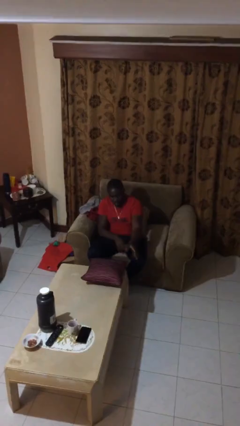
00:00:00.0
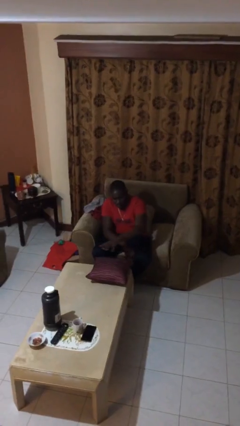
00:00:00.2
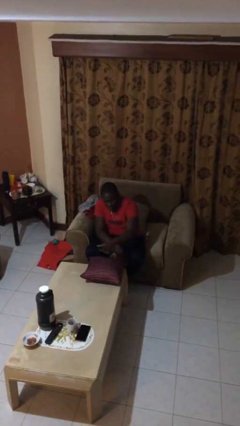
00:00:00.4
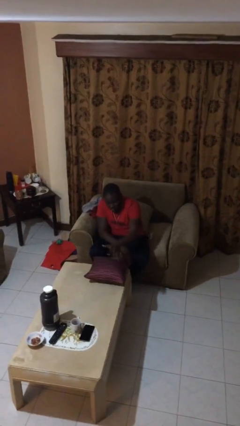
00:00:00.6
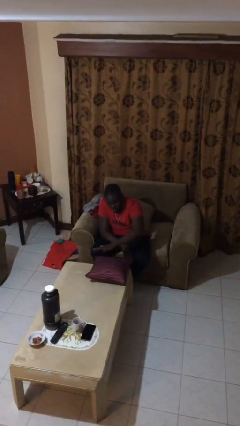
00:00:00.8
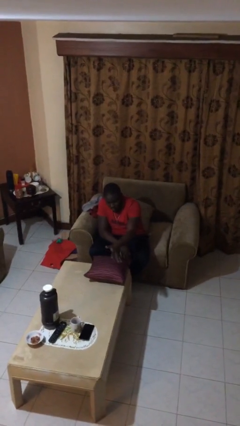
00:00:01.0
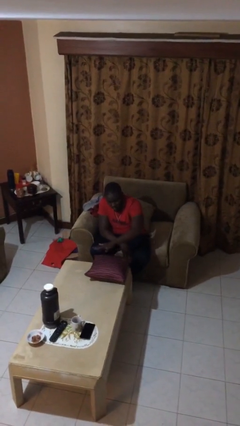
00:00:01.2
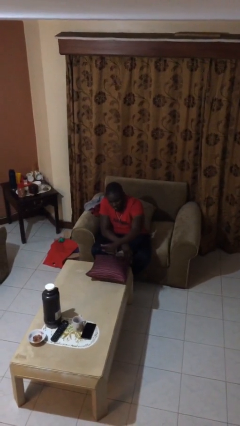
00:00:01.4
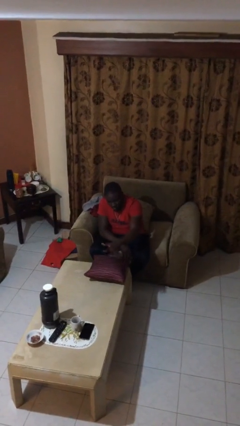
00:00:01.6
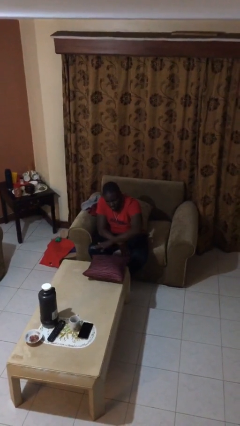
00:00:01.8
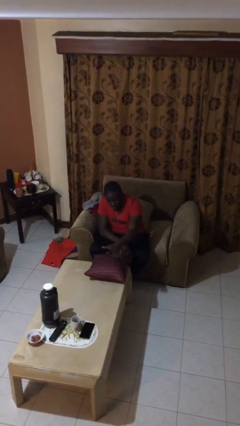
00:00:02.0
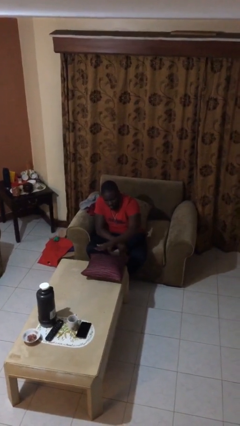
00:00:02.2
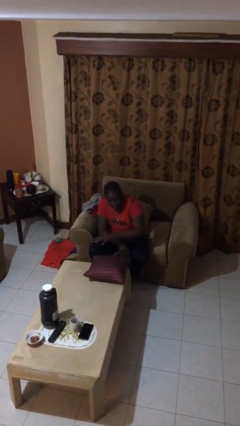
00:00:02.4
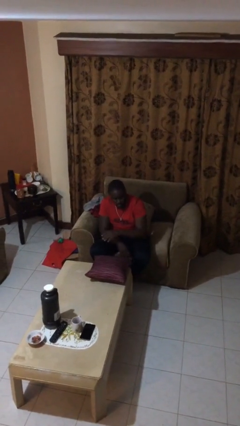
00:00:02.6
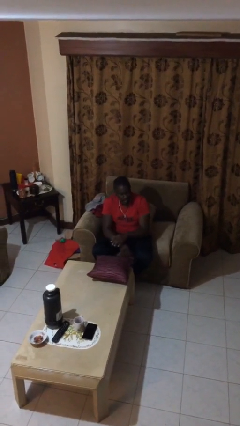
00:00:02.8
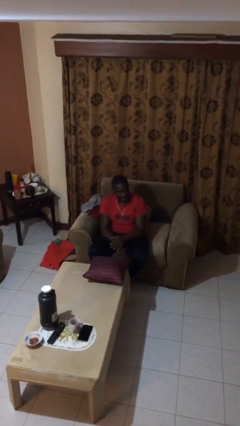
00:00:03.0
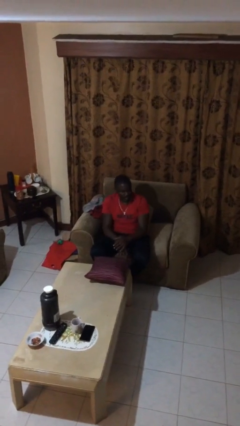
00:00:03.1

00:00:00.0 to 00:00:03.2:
person waves hand over object

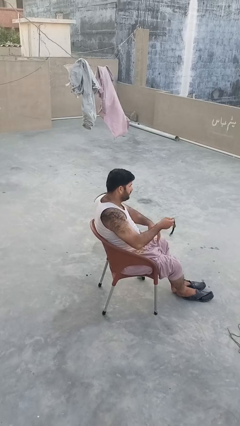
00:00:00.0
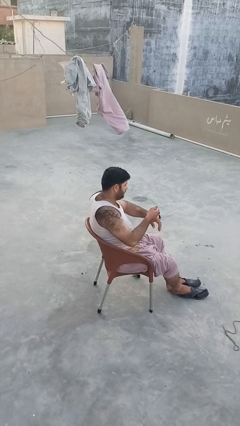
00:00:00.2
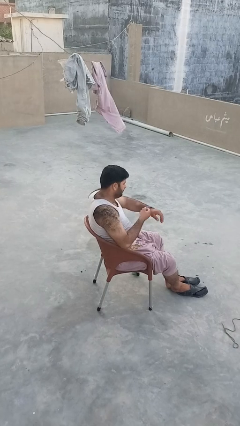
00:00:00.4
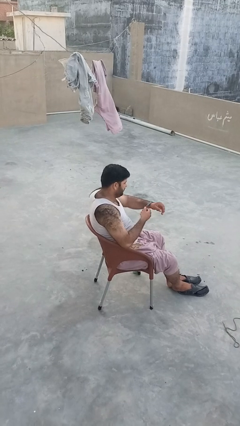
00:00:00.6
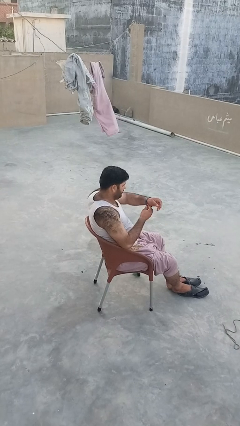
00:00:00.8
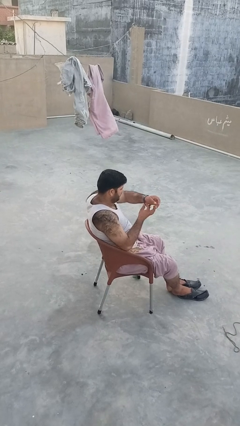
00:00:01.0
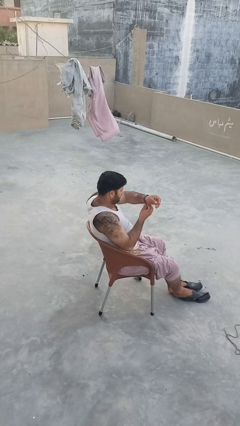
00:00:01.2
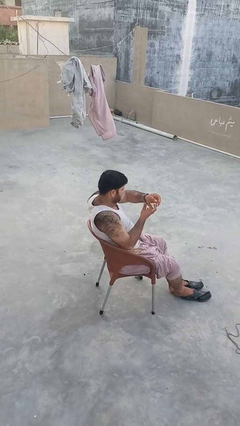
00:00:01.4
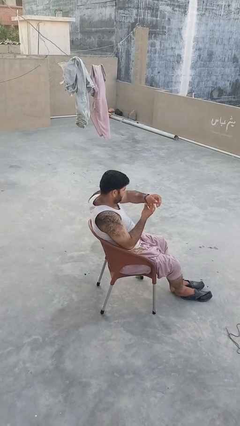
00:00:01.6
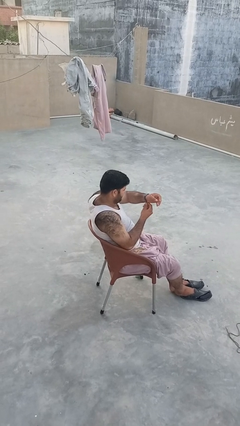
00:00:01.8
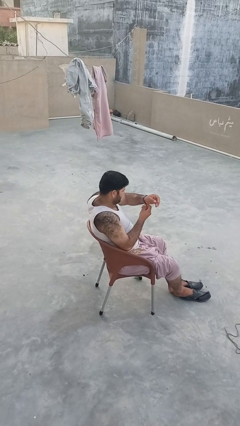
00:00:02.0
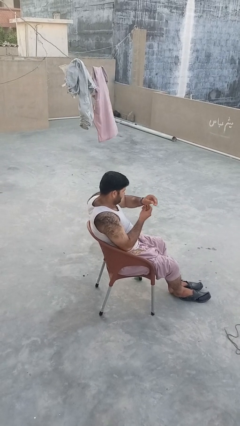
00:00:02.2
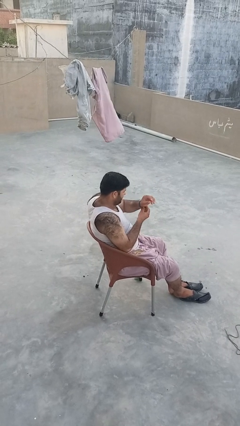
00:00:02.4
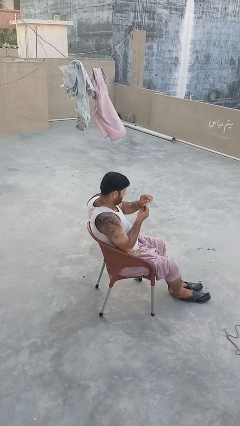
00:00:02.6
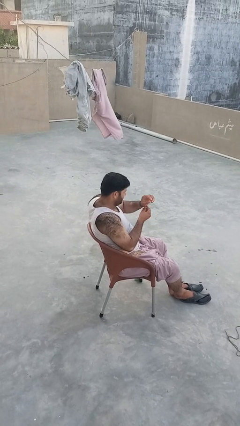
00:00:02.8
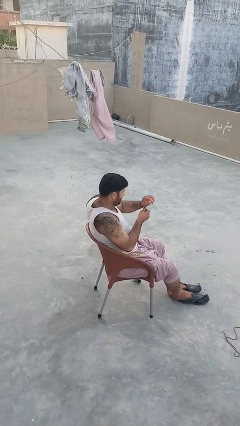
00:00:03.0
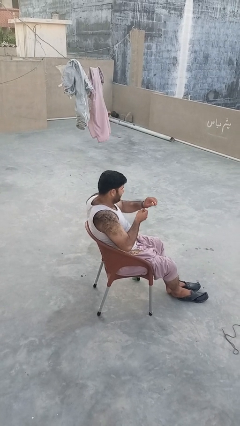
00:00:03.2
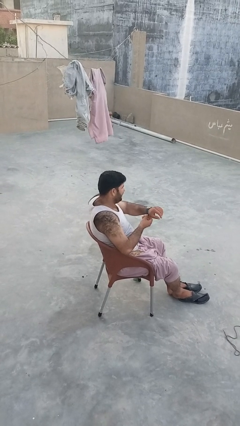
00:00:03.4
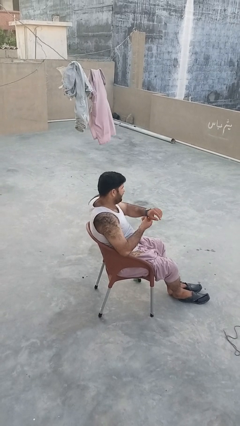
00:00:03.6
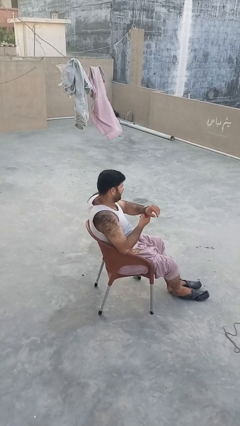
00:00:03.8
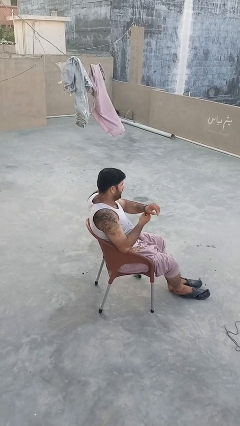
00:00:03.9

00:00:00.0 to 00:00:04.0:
person puts on wristwatch

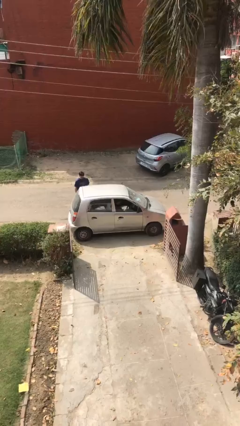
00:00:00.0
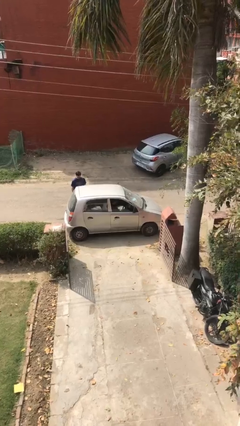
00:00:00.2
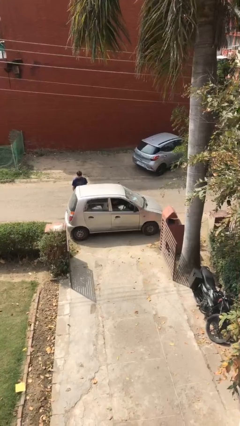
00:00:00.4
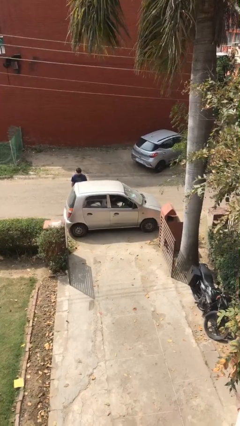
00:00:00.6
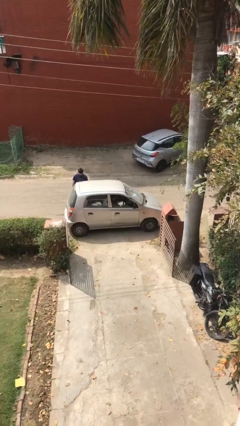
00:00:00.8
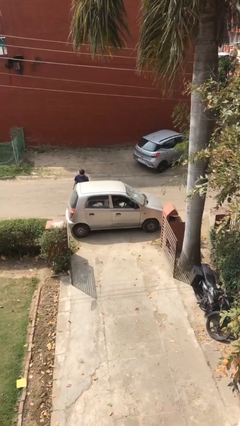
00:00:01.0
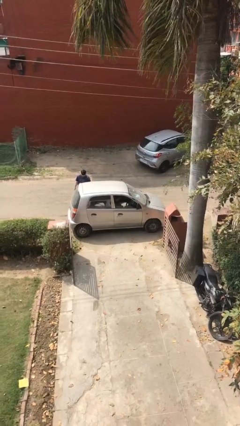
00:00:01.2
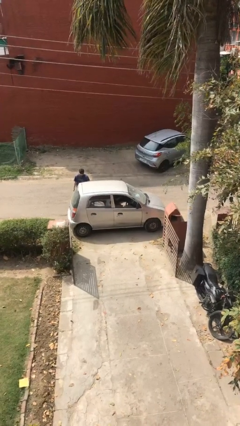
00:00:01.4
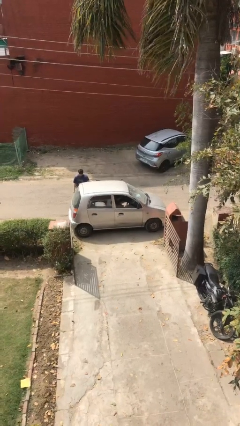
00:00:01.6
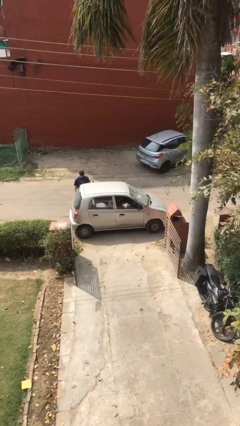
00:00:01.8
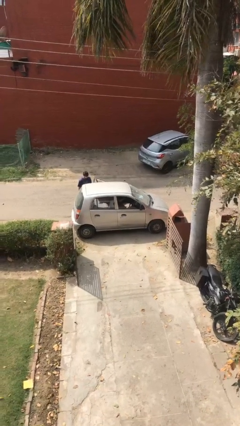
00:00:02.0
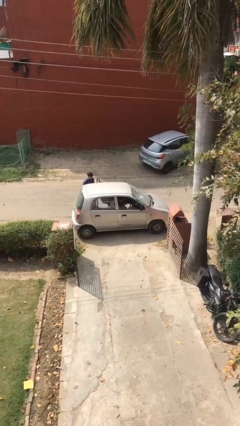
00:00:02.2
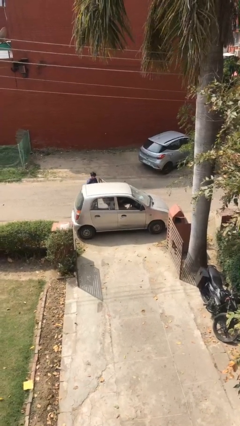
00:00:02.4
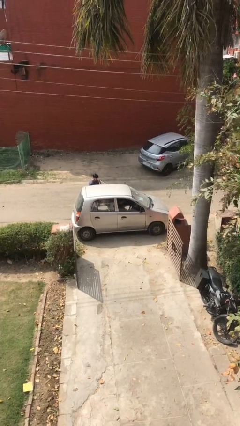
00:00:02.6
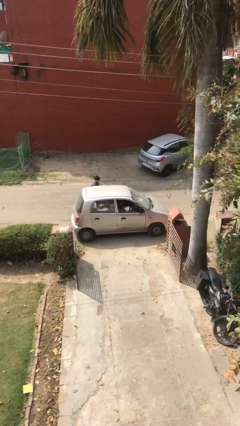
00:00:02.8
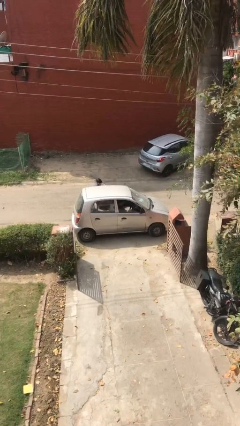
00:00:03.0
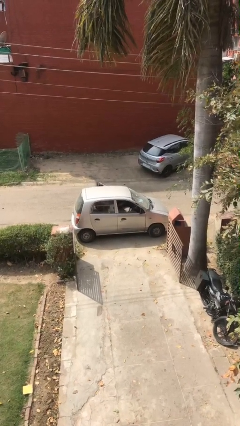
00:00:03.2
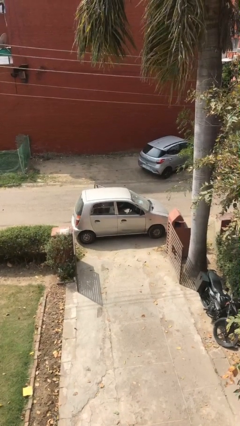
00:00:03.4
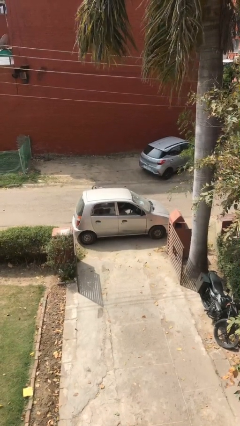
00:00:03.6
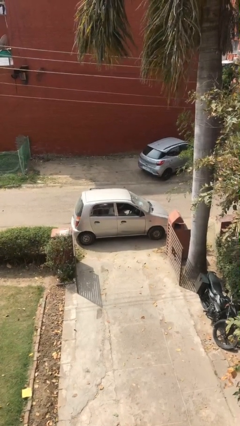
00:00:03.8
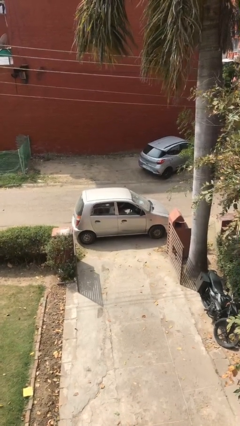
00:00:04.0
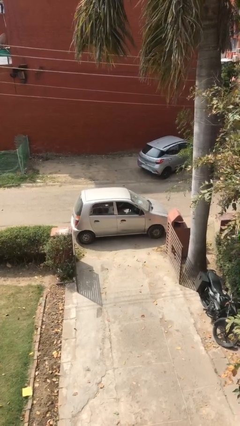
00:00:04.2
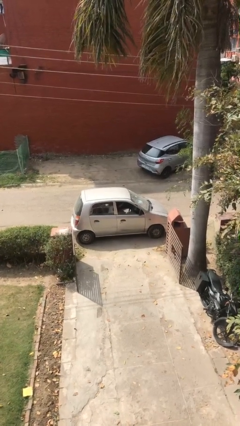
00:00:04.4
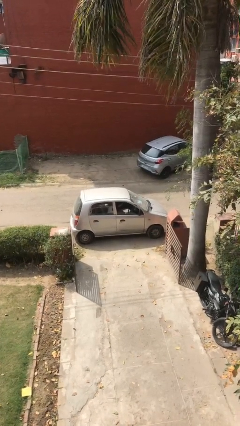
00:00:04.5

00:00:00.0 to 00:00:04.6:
car picks up person

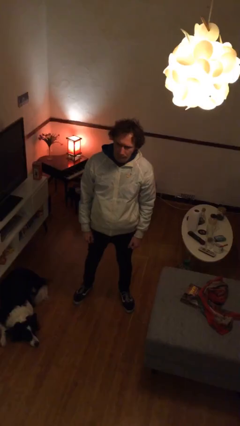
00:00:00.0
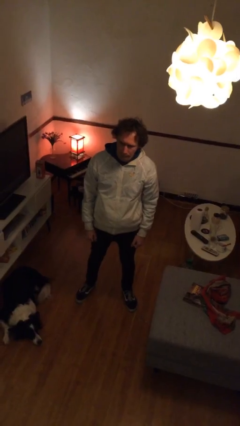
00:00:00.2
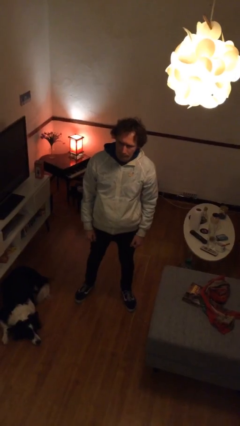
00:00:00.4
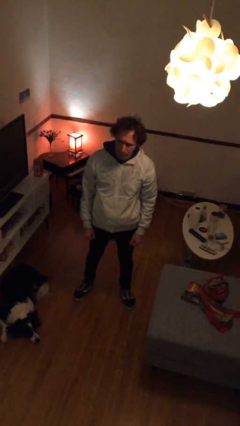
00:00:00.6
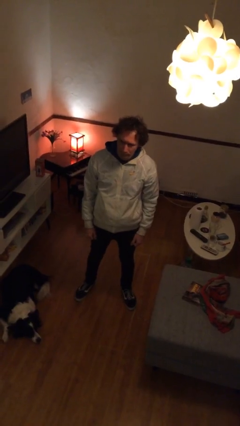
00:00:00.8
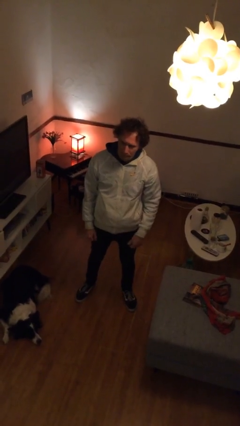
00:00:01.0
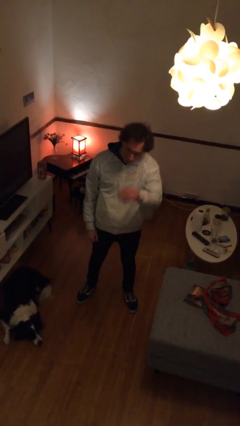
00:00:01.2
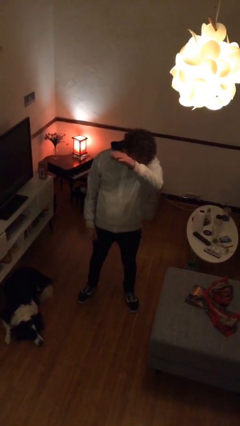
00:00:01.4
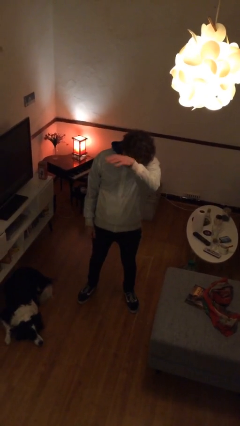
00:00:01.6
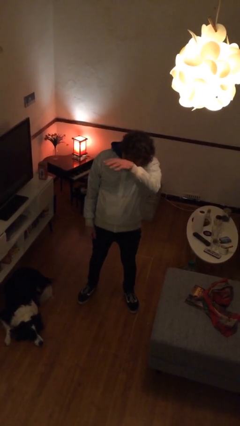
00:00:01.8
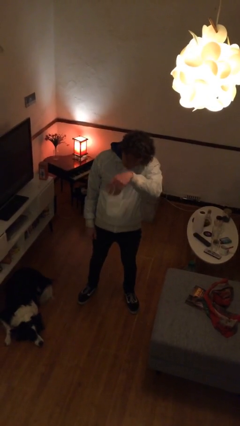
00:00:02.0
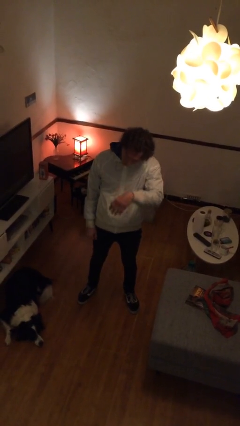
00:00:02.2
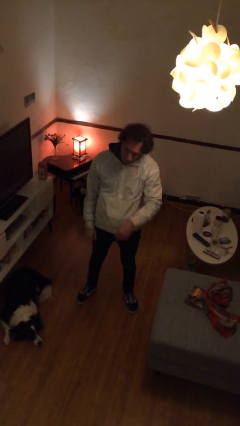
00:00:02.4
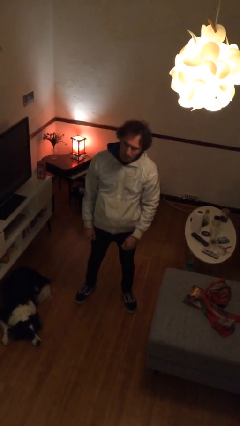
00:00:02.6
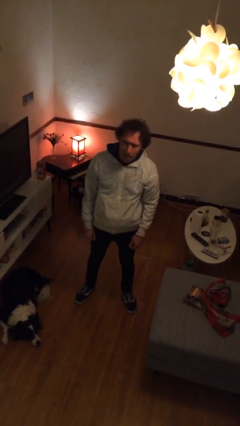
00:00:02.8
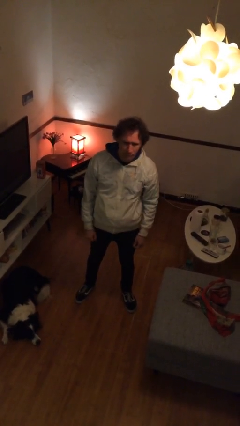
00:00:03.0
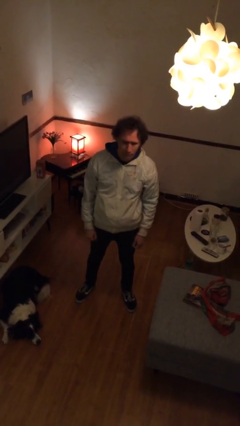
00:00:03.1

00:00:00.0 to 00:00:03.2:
person gestures come here

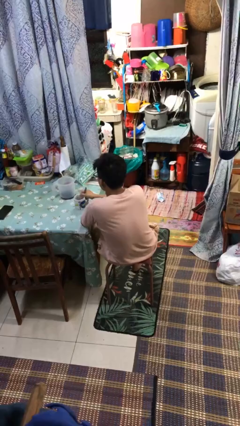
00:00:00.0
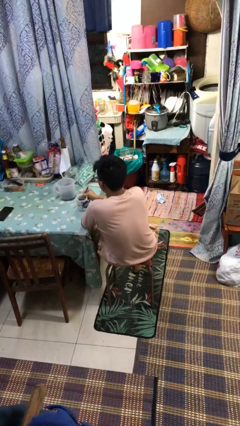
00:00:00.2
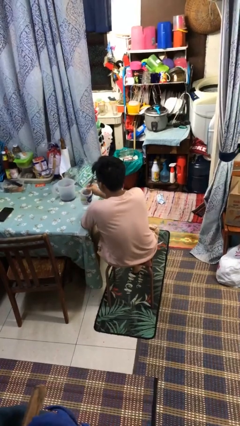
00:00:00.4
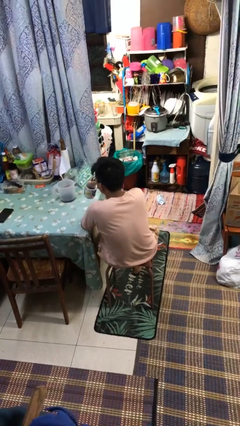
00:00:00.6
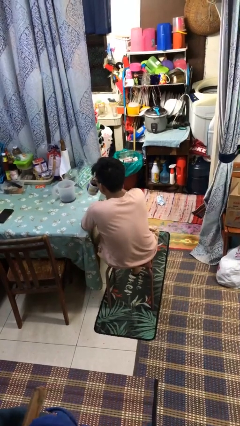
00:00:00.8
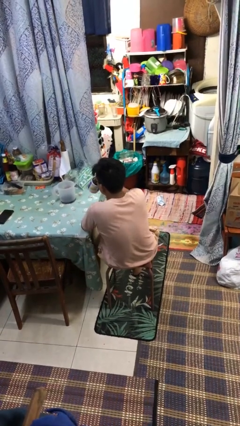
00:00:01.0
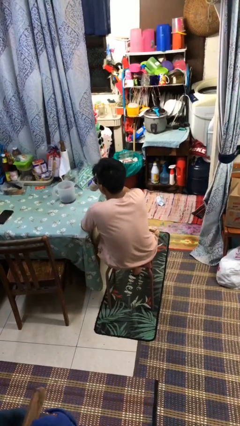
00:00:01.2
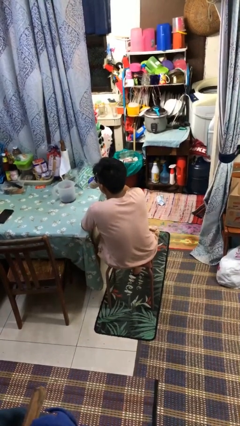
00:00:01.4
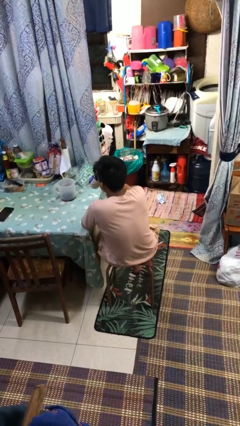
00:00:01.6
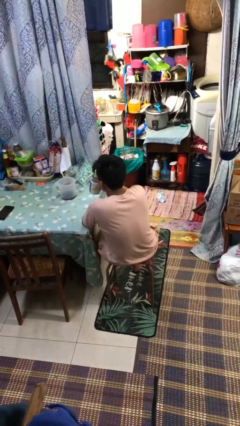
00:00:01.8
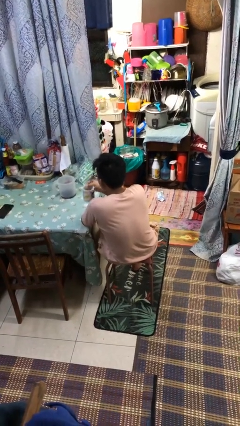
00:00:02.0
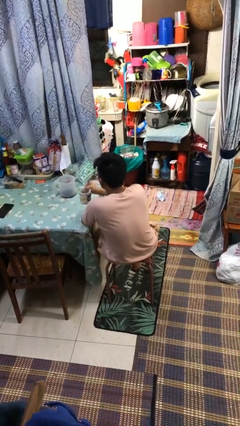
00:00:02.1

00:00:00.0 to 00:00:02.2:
person drinks from mug

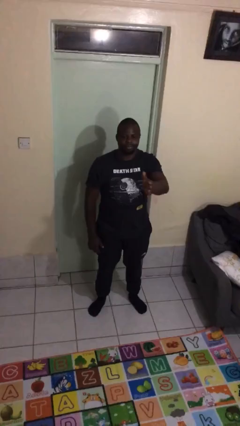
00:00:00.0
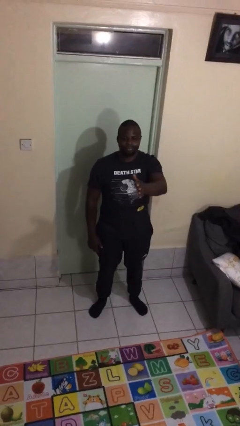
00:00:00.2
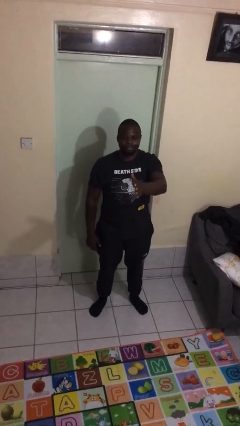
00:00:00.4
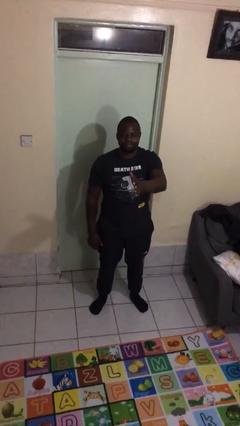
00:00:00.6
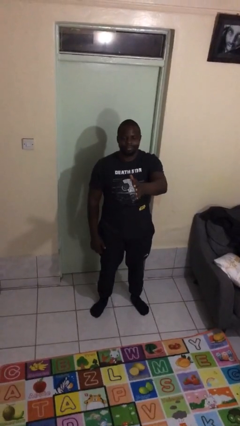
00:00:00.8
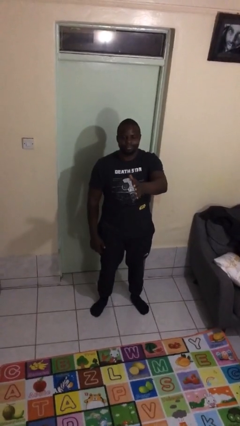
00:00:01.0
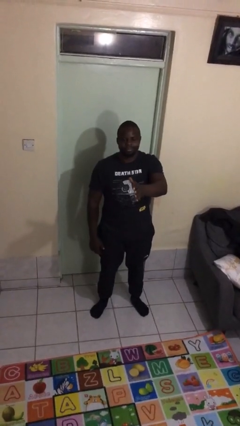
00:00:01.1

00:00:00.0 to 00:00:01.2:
person gestures swipe right
